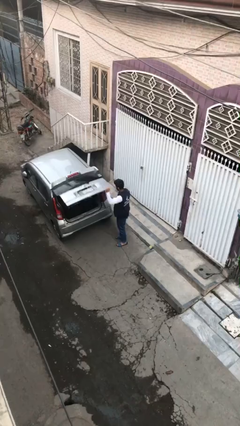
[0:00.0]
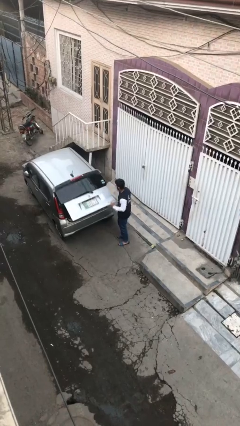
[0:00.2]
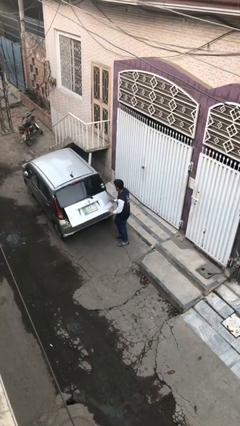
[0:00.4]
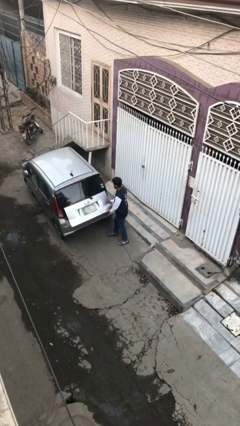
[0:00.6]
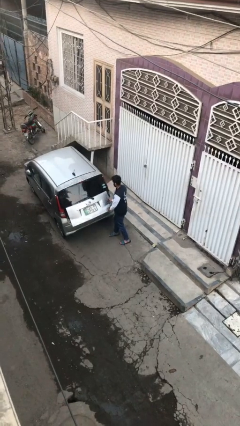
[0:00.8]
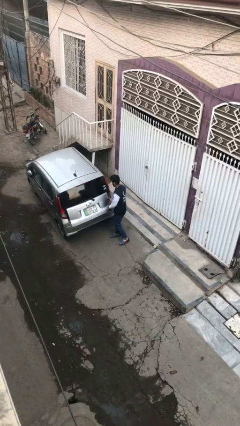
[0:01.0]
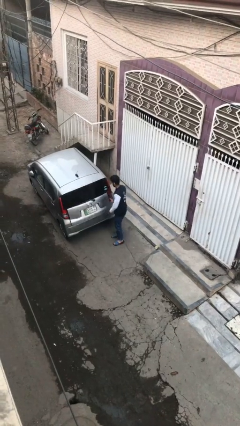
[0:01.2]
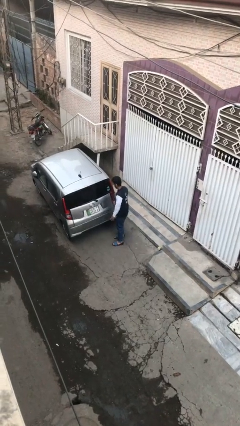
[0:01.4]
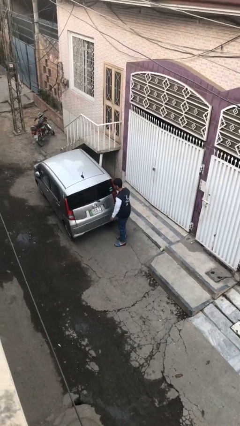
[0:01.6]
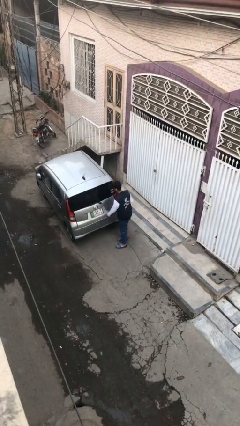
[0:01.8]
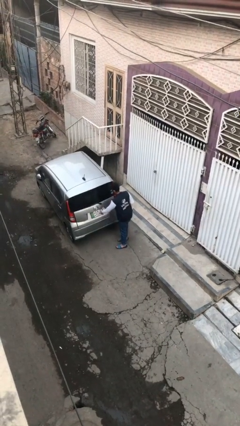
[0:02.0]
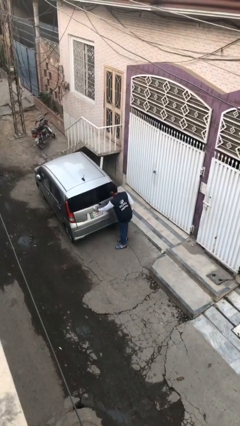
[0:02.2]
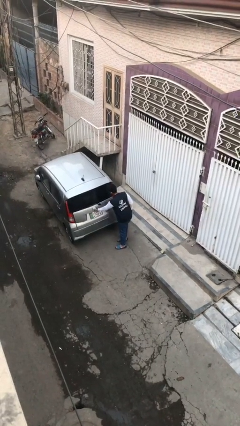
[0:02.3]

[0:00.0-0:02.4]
person closes car trunk

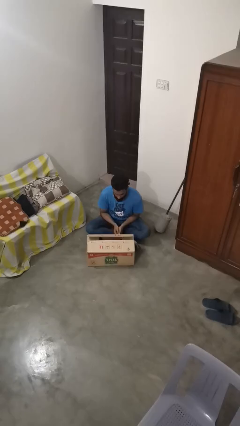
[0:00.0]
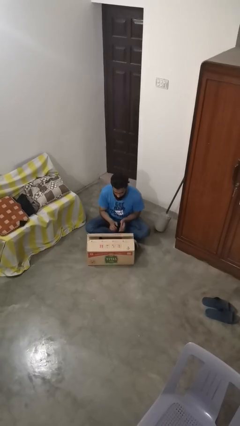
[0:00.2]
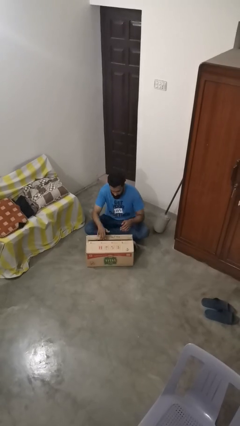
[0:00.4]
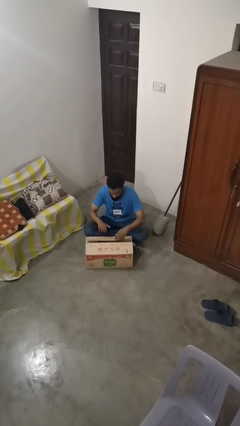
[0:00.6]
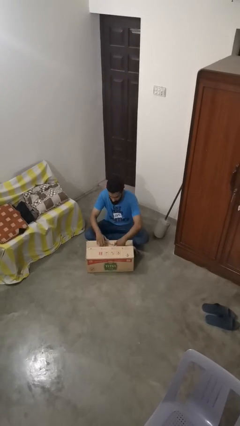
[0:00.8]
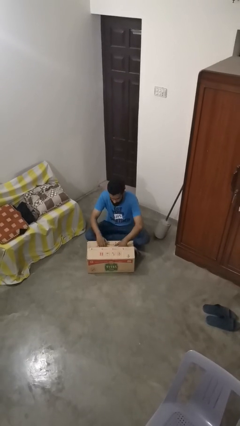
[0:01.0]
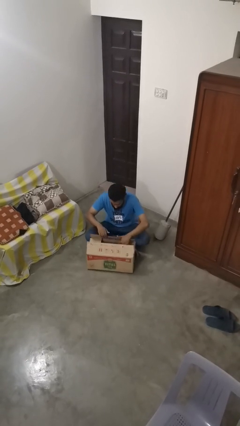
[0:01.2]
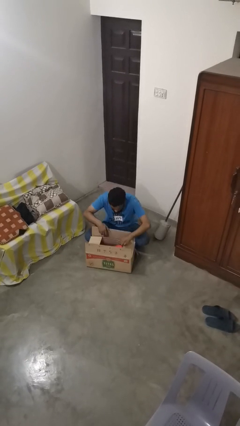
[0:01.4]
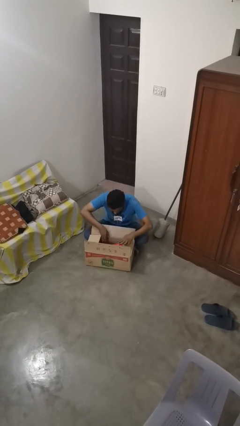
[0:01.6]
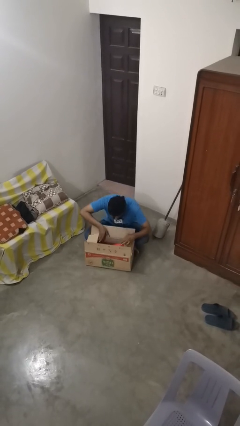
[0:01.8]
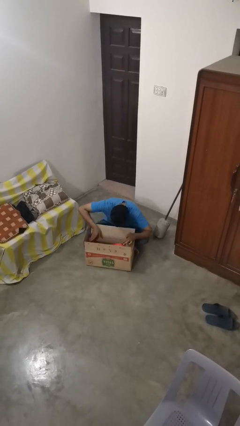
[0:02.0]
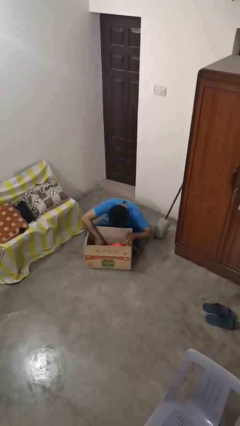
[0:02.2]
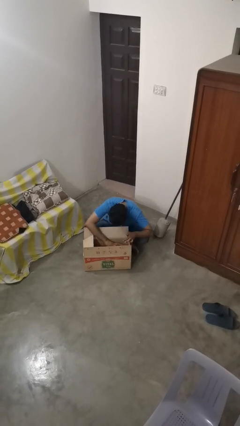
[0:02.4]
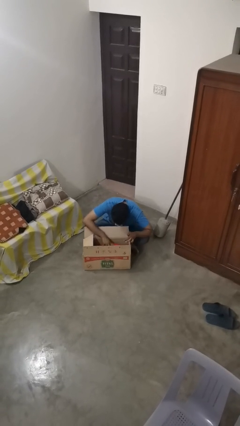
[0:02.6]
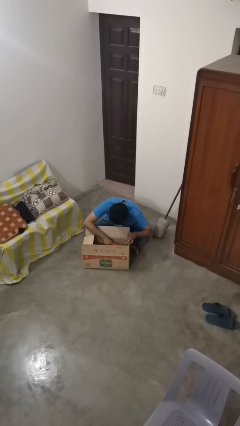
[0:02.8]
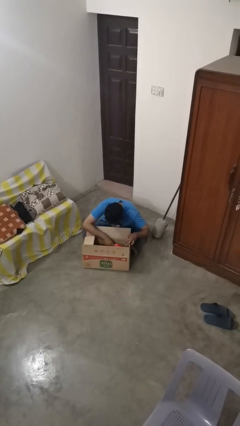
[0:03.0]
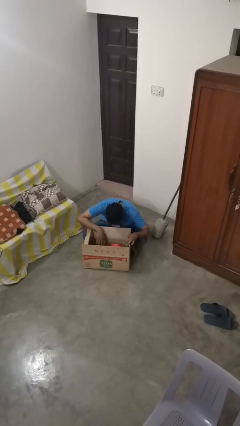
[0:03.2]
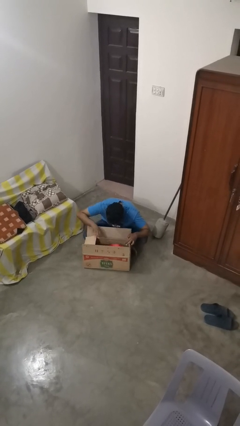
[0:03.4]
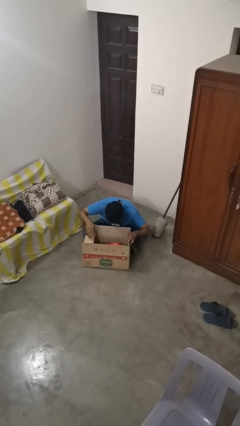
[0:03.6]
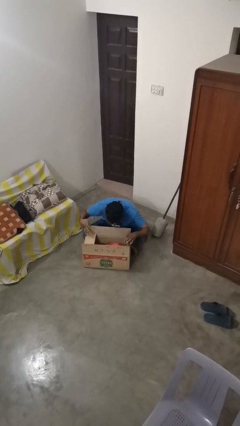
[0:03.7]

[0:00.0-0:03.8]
person searches in box

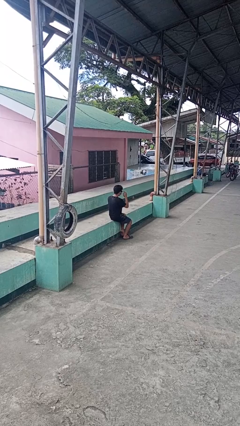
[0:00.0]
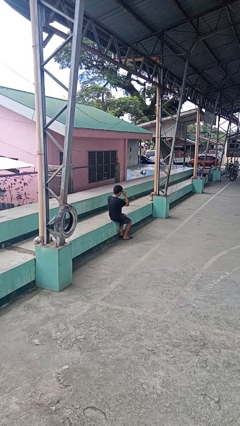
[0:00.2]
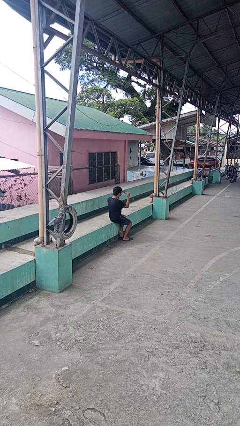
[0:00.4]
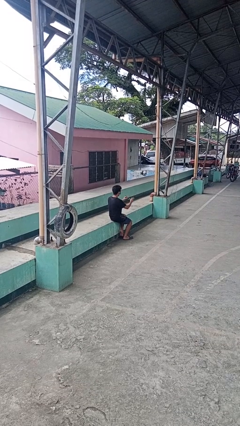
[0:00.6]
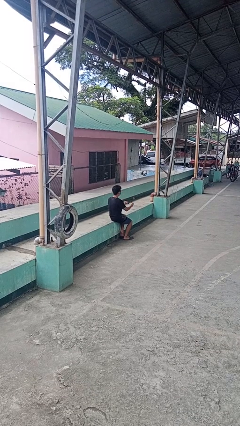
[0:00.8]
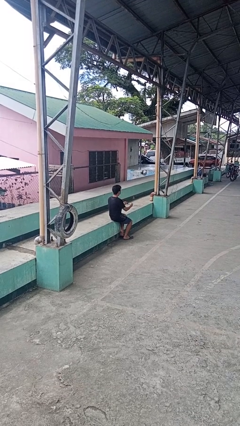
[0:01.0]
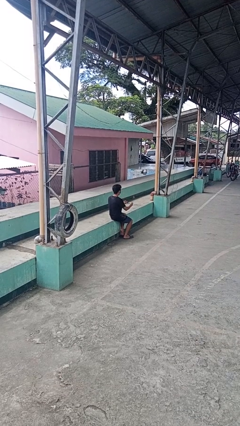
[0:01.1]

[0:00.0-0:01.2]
person takes off sunglasses

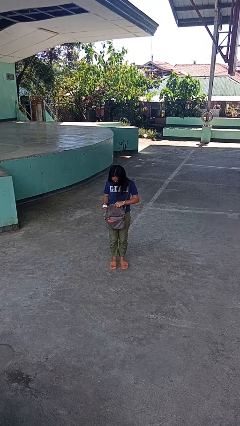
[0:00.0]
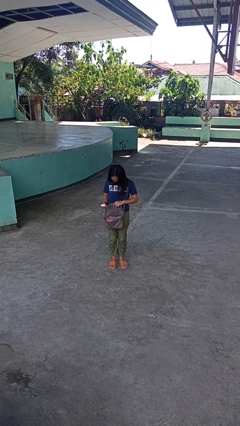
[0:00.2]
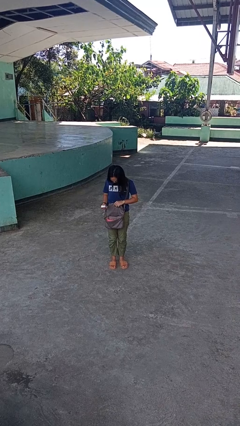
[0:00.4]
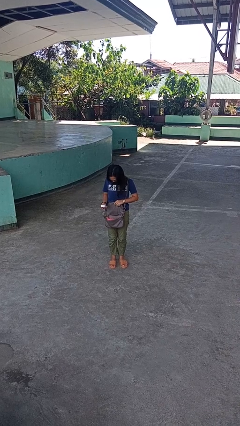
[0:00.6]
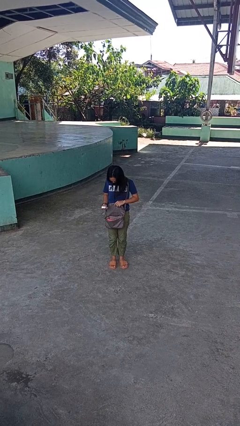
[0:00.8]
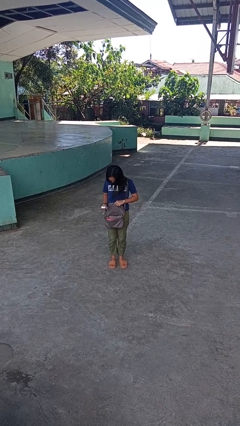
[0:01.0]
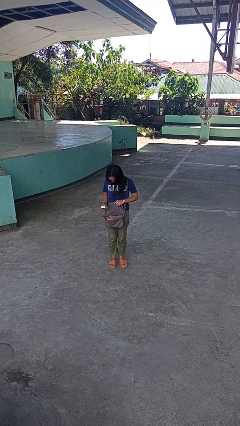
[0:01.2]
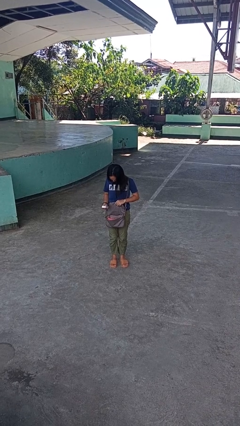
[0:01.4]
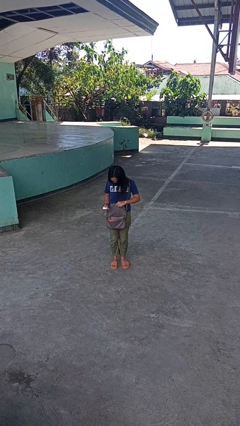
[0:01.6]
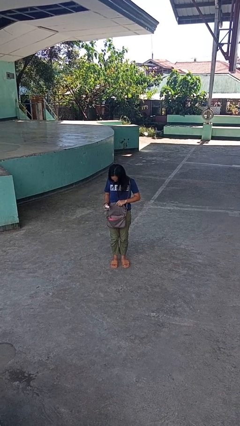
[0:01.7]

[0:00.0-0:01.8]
person takes object from purse

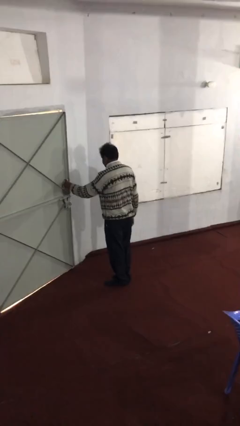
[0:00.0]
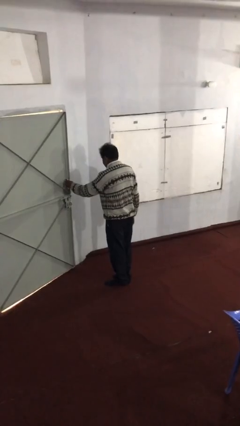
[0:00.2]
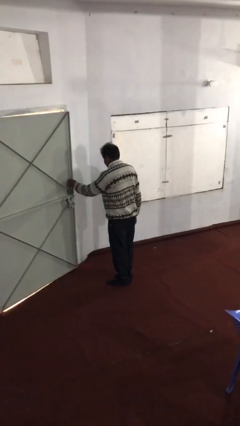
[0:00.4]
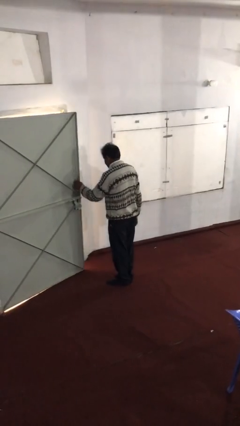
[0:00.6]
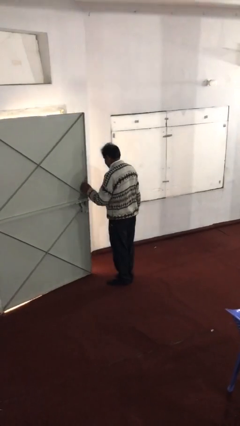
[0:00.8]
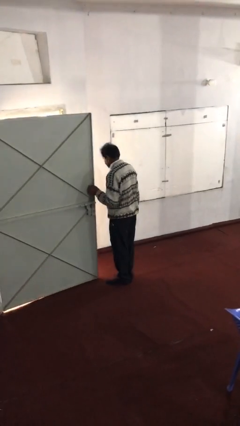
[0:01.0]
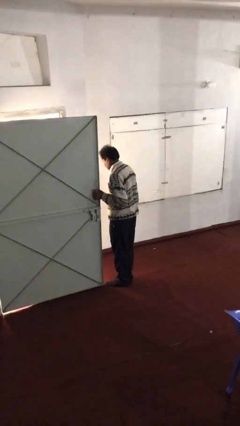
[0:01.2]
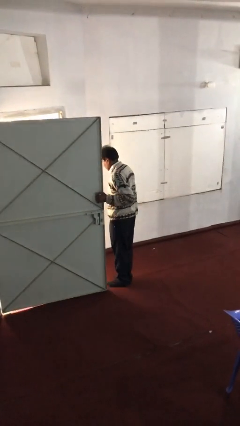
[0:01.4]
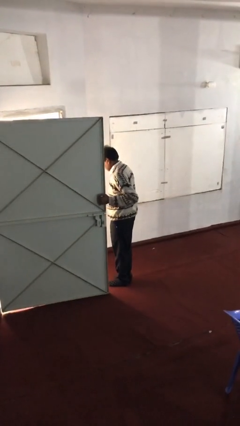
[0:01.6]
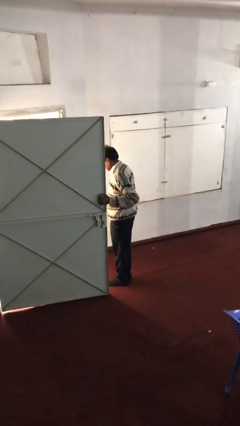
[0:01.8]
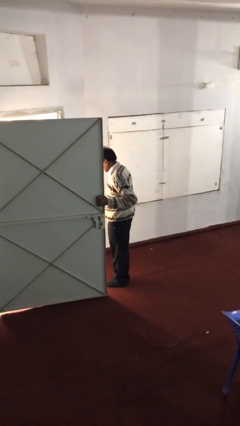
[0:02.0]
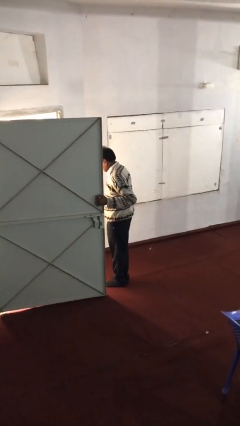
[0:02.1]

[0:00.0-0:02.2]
person opens facility door

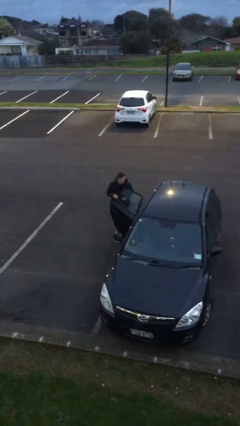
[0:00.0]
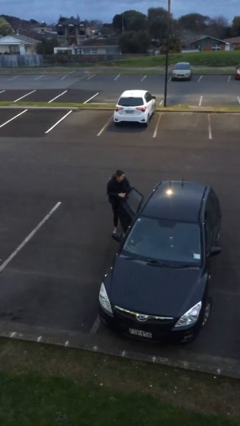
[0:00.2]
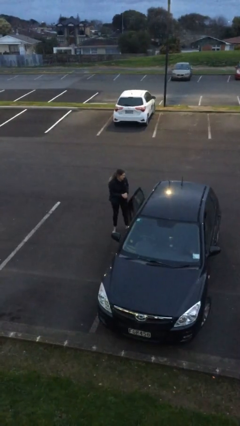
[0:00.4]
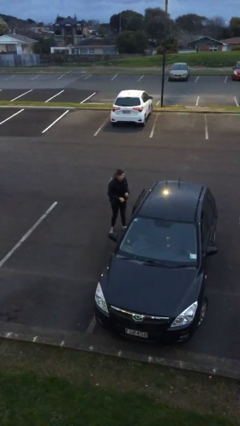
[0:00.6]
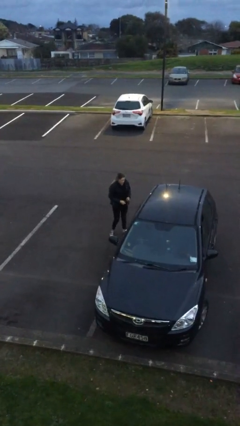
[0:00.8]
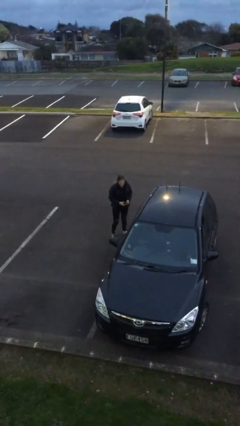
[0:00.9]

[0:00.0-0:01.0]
person closes car door

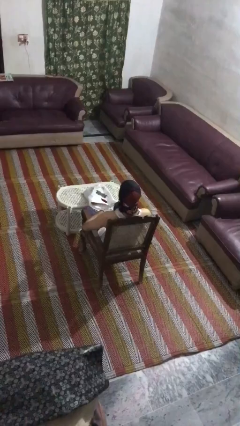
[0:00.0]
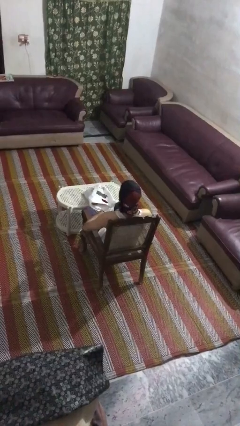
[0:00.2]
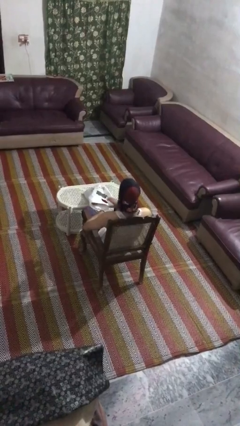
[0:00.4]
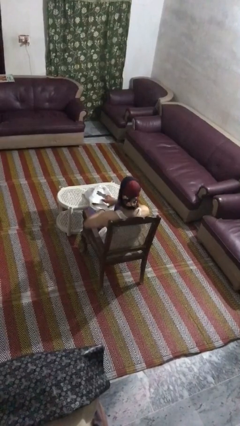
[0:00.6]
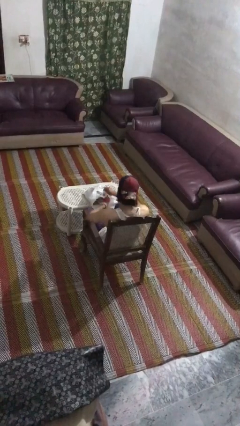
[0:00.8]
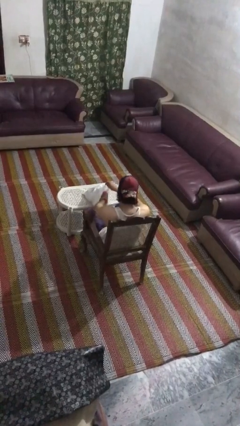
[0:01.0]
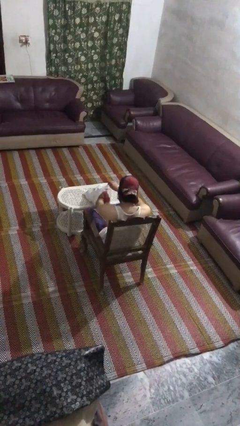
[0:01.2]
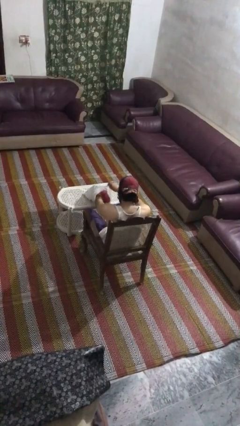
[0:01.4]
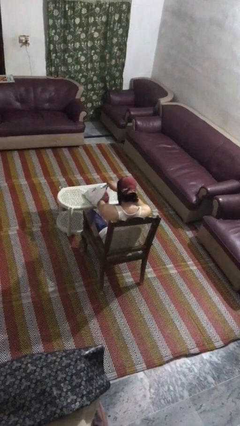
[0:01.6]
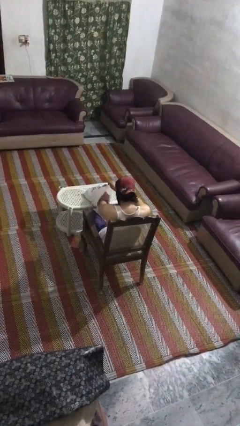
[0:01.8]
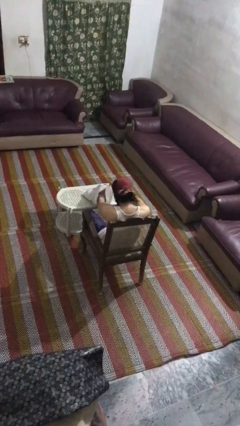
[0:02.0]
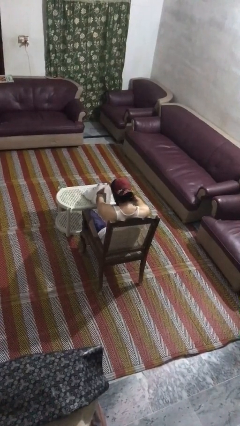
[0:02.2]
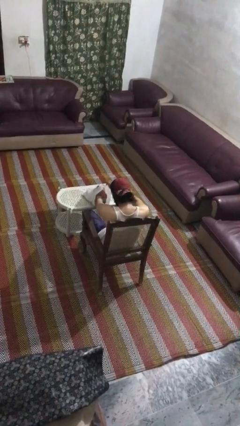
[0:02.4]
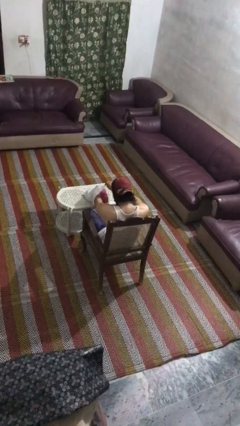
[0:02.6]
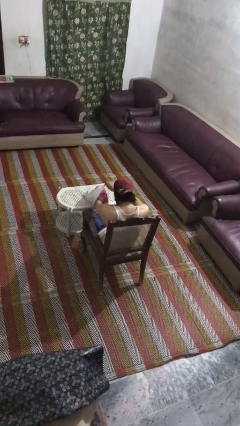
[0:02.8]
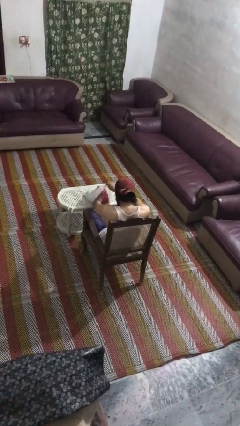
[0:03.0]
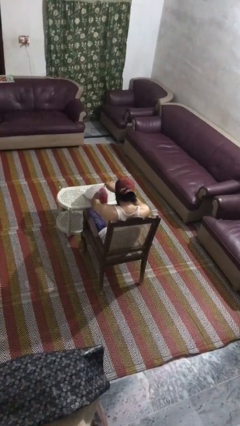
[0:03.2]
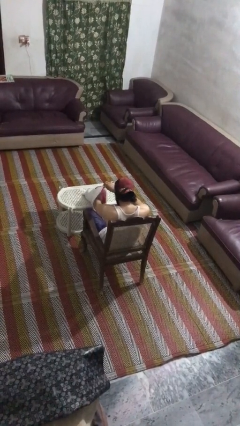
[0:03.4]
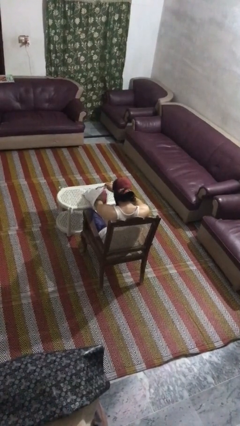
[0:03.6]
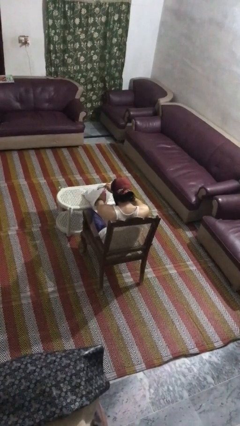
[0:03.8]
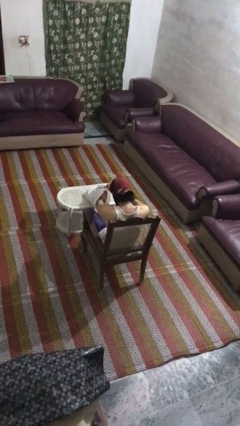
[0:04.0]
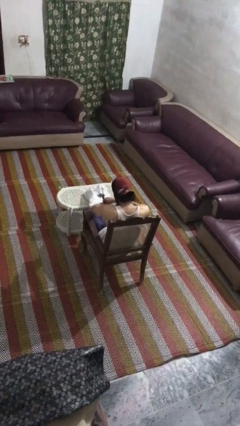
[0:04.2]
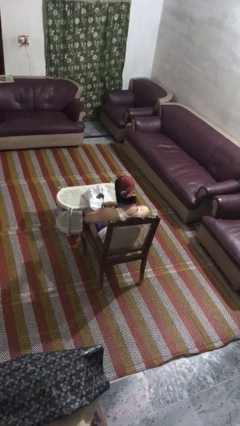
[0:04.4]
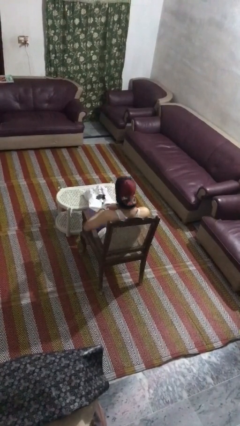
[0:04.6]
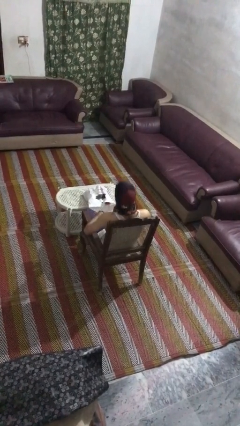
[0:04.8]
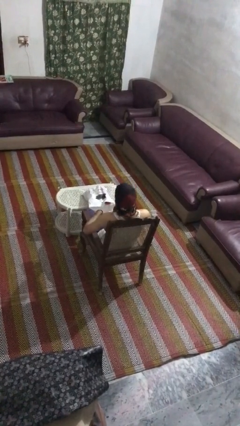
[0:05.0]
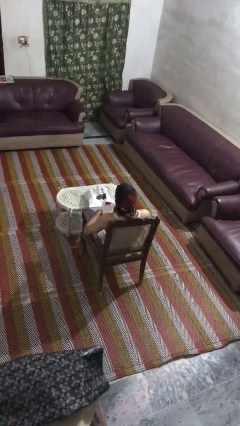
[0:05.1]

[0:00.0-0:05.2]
person searches in bag
